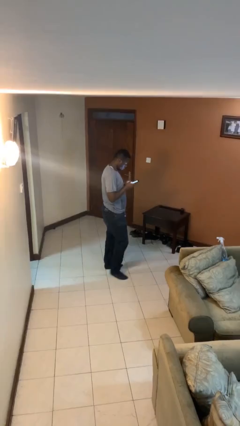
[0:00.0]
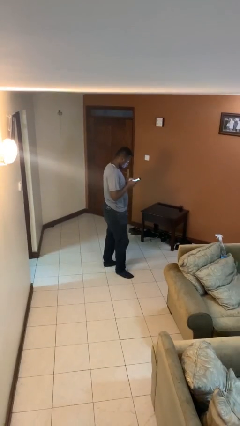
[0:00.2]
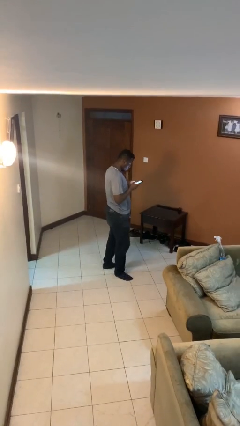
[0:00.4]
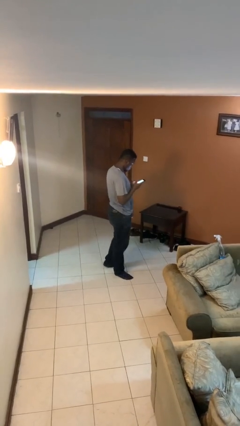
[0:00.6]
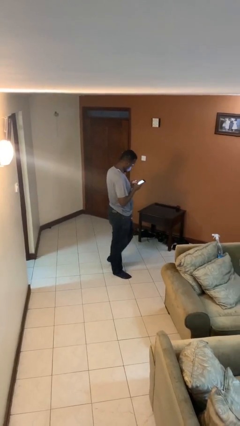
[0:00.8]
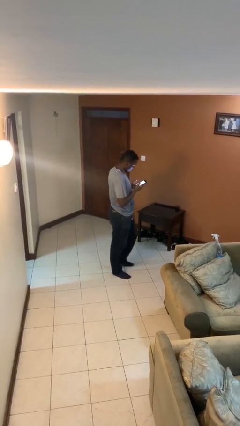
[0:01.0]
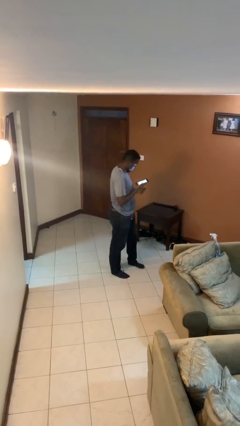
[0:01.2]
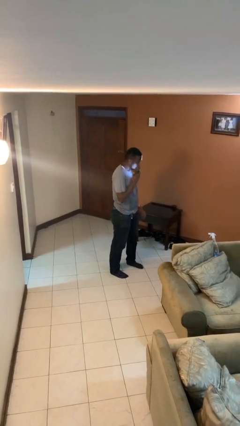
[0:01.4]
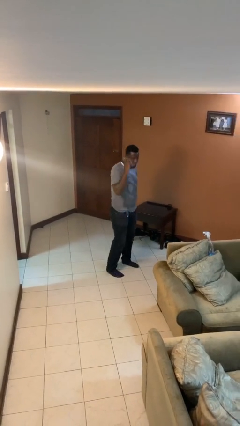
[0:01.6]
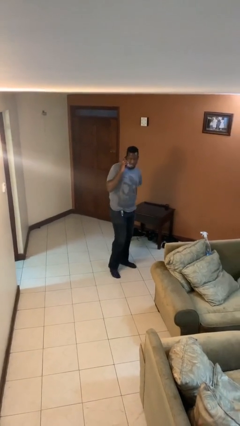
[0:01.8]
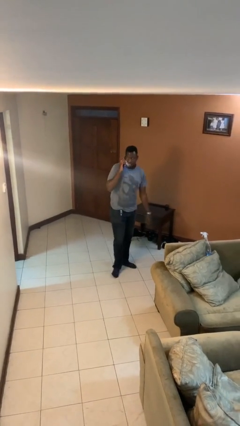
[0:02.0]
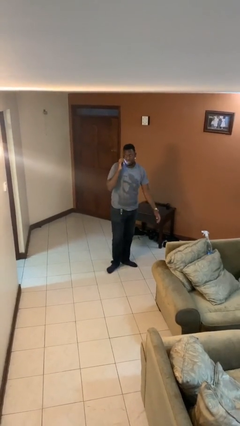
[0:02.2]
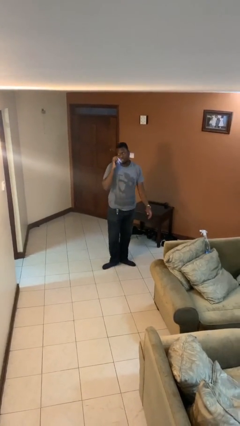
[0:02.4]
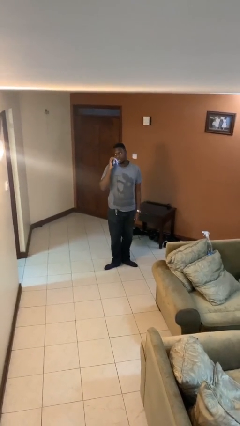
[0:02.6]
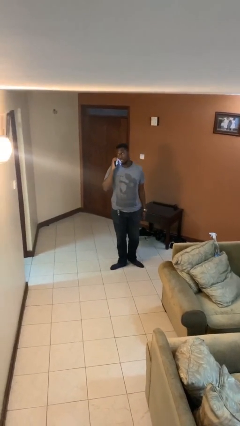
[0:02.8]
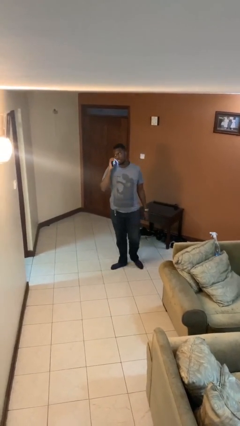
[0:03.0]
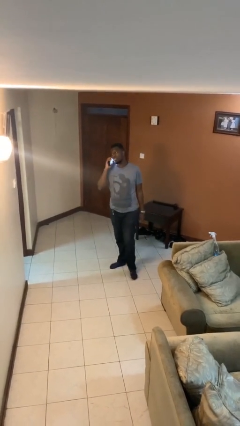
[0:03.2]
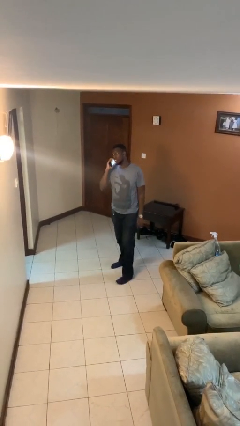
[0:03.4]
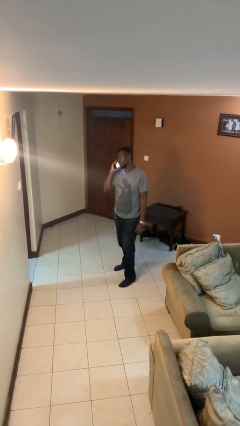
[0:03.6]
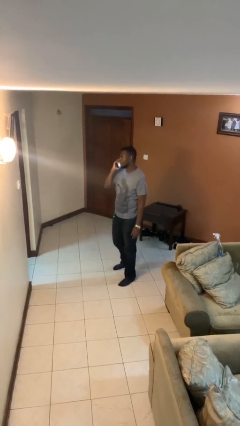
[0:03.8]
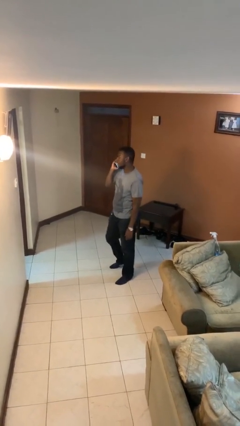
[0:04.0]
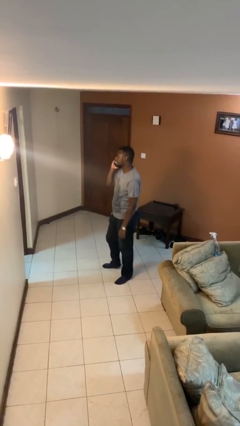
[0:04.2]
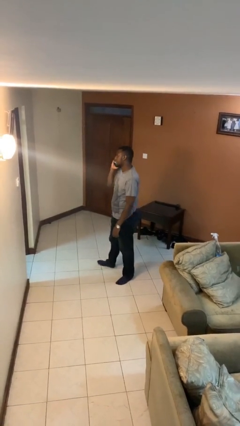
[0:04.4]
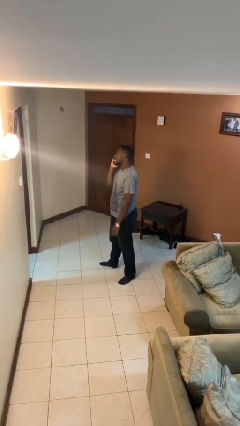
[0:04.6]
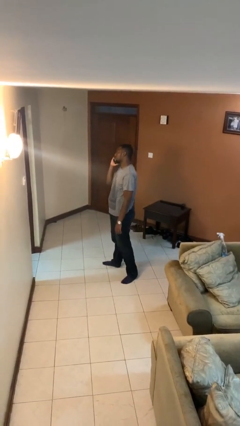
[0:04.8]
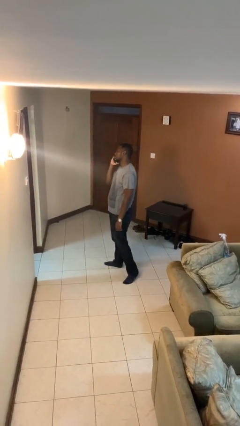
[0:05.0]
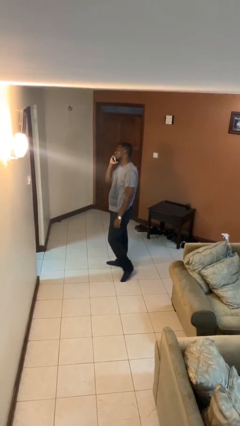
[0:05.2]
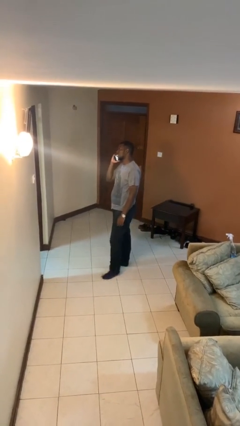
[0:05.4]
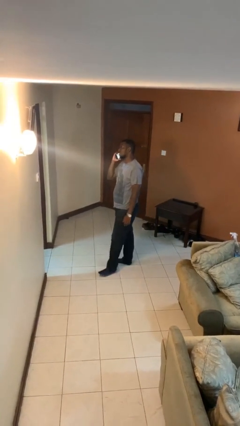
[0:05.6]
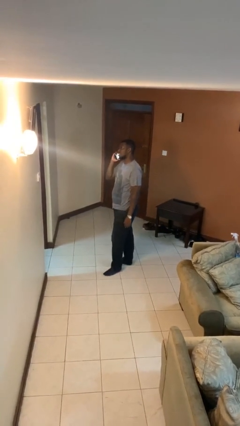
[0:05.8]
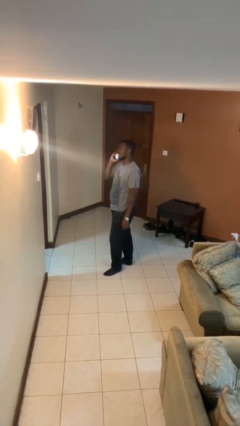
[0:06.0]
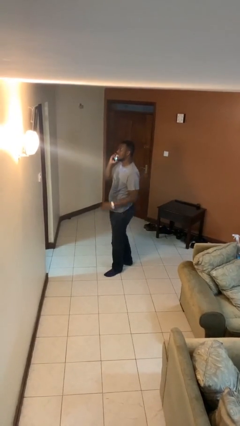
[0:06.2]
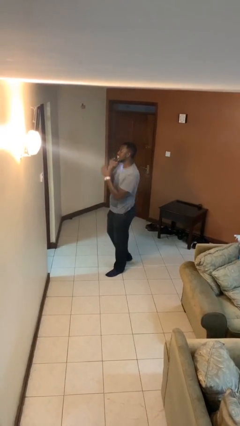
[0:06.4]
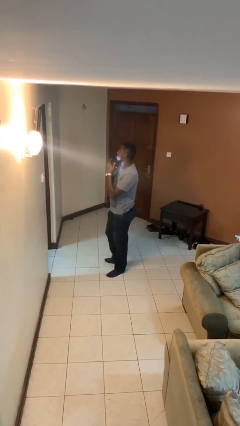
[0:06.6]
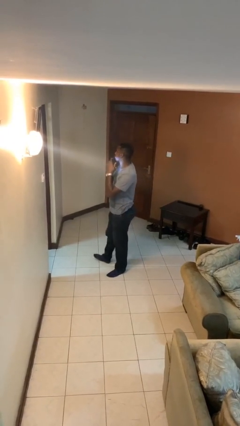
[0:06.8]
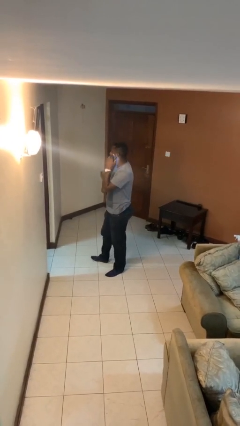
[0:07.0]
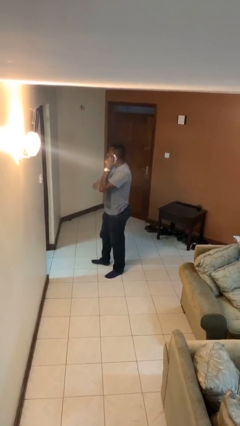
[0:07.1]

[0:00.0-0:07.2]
person talks on phone

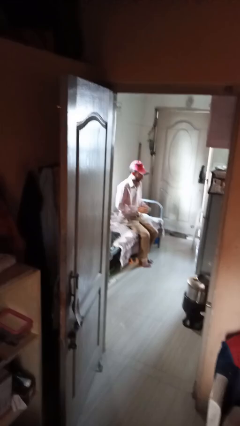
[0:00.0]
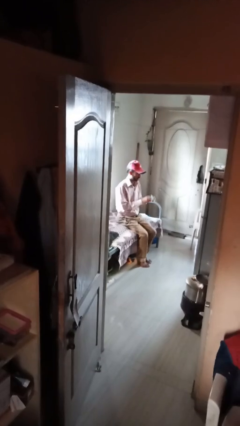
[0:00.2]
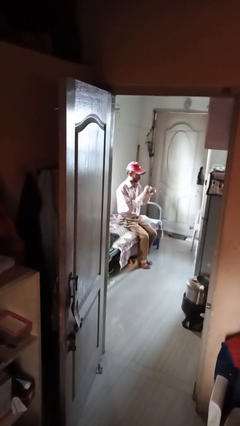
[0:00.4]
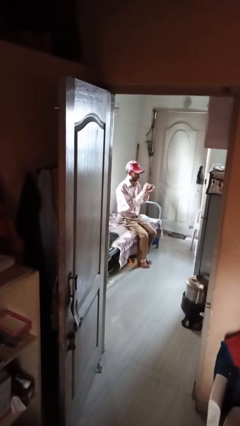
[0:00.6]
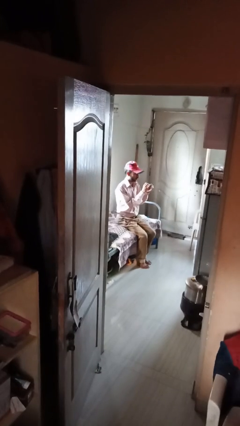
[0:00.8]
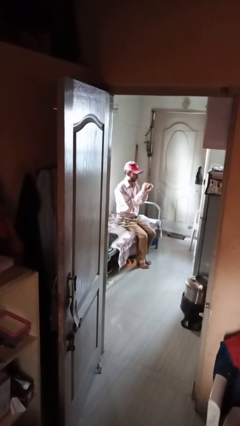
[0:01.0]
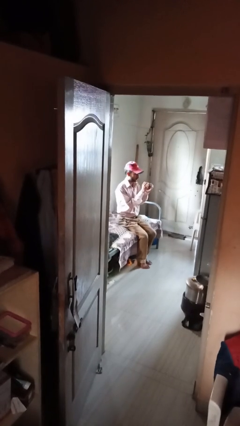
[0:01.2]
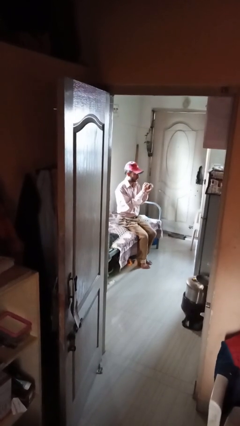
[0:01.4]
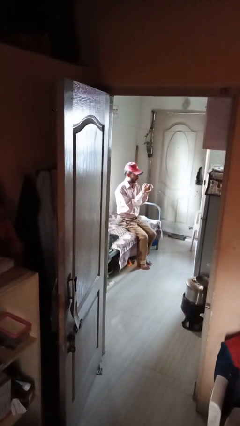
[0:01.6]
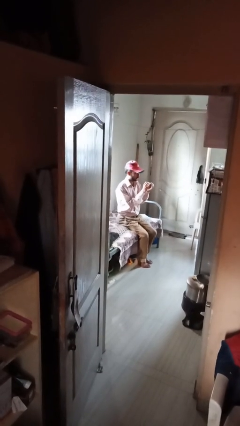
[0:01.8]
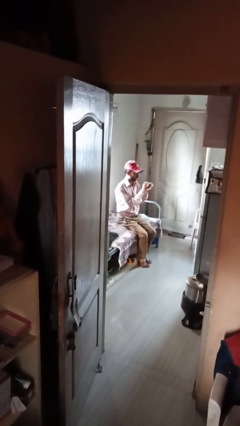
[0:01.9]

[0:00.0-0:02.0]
person files fingernails

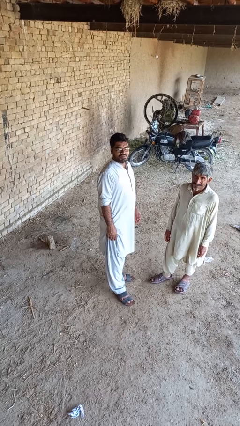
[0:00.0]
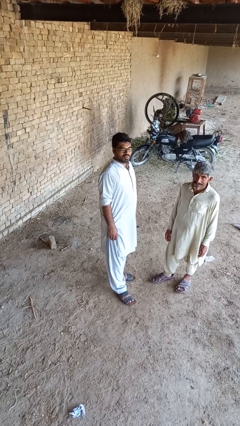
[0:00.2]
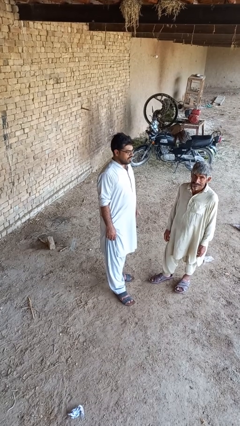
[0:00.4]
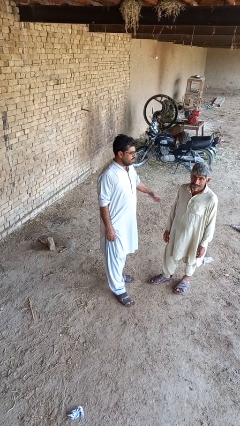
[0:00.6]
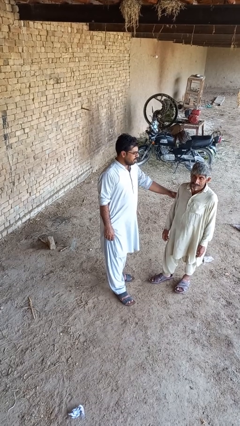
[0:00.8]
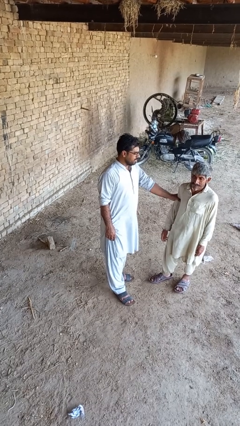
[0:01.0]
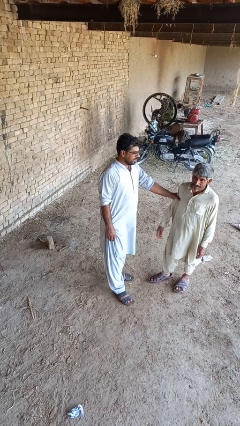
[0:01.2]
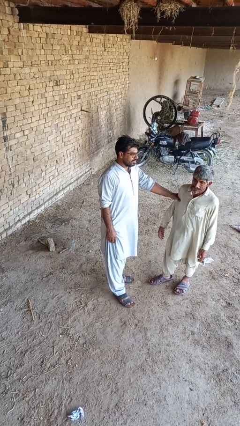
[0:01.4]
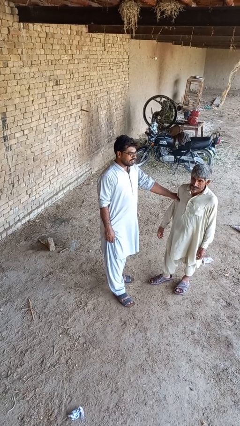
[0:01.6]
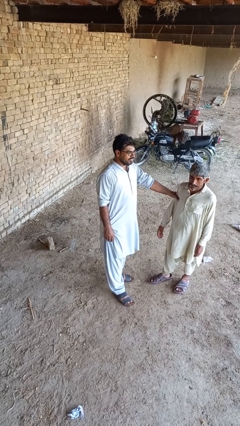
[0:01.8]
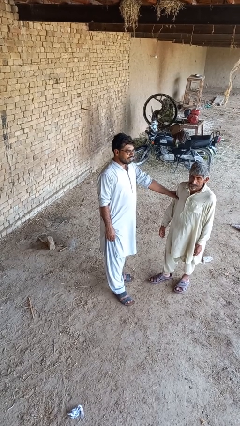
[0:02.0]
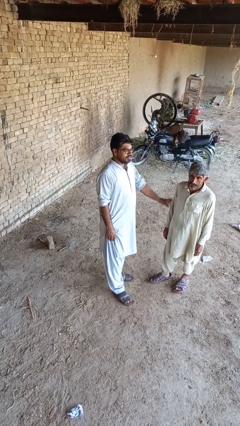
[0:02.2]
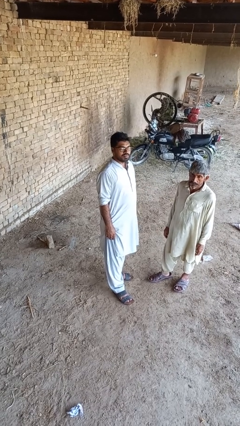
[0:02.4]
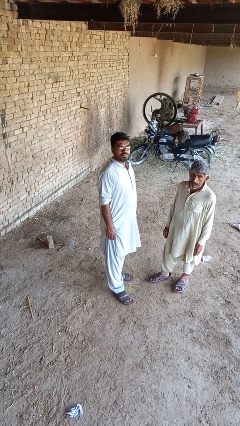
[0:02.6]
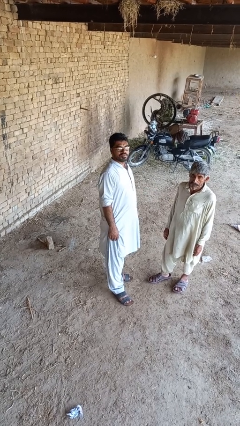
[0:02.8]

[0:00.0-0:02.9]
person grabs person by bicep

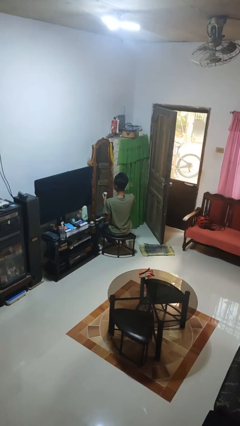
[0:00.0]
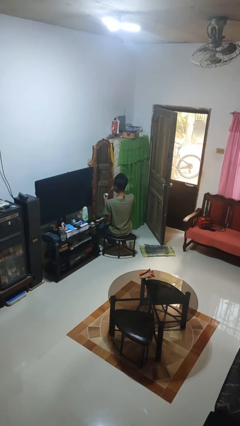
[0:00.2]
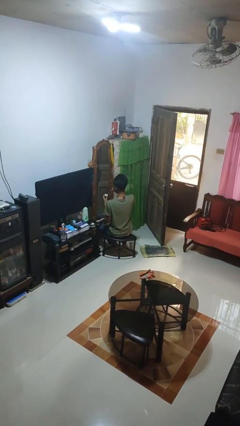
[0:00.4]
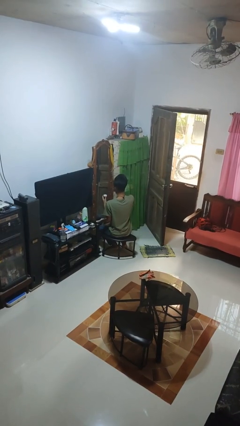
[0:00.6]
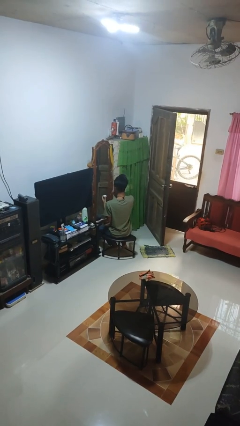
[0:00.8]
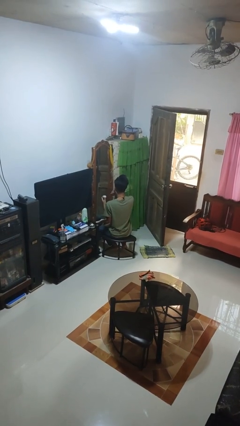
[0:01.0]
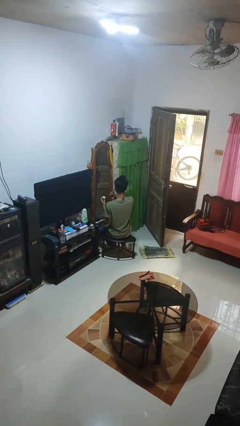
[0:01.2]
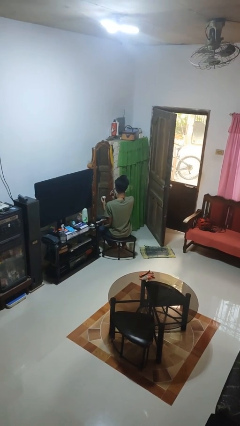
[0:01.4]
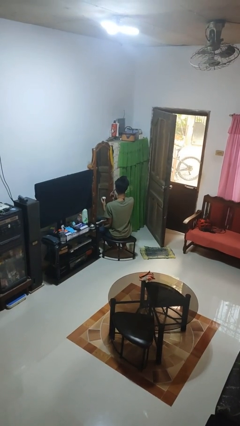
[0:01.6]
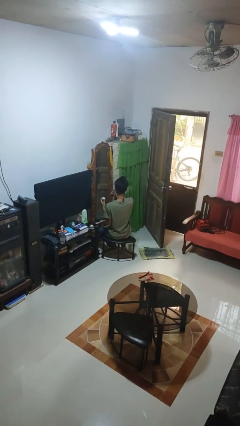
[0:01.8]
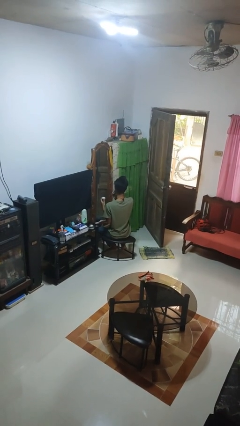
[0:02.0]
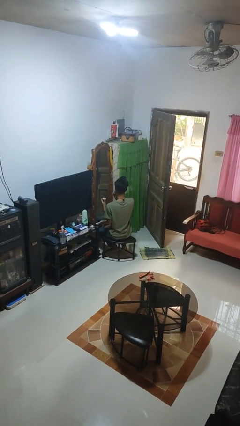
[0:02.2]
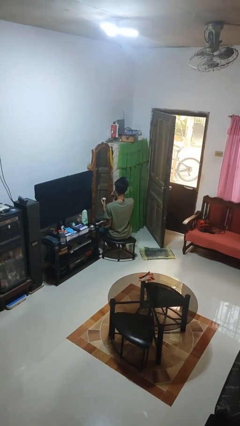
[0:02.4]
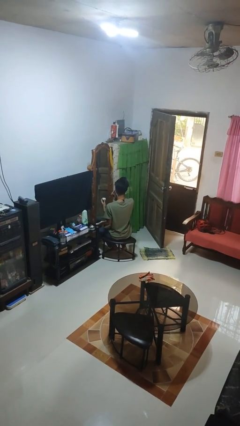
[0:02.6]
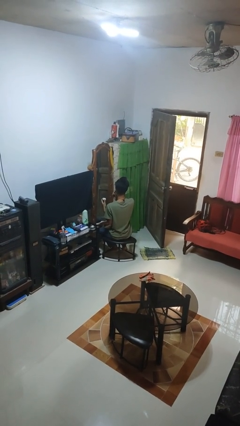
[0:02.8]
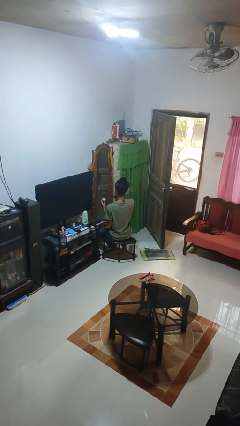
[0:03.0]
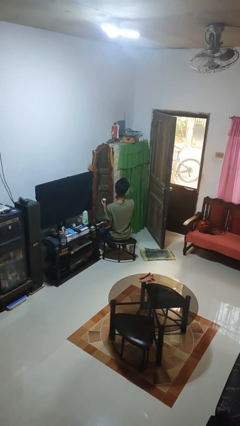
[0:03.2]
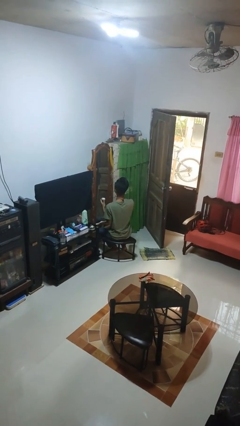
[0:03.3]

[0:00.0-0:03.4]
person applies eye makeup

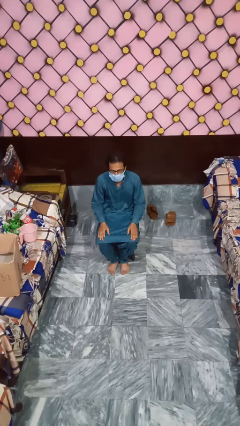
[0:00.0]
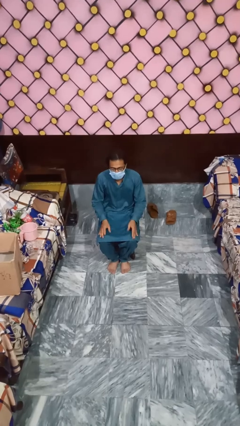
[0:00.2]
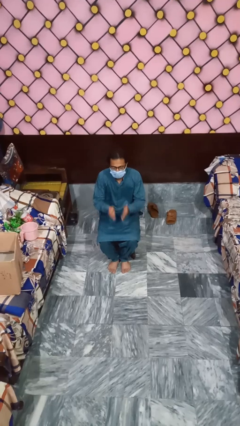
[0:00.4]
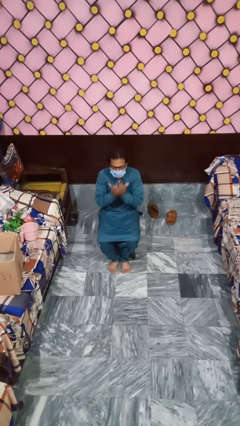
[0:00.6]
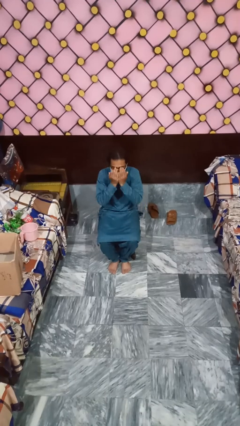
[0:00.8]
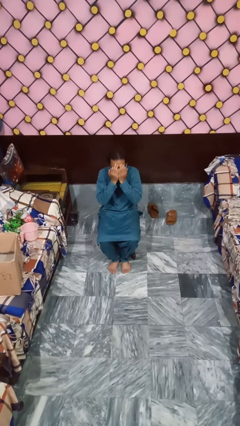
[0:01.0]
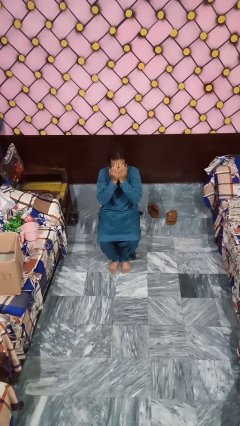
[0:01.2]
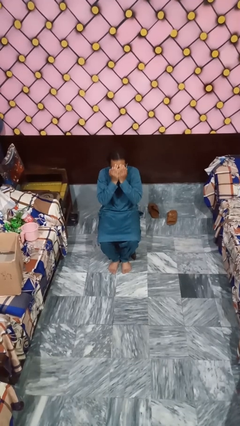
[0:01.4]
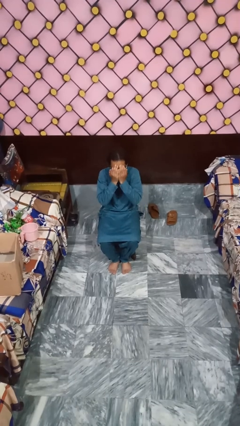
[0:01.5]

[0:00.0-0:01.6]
person covers face with hands

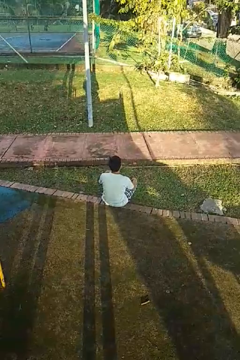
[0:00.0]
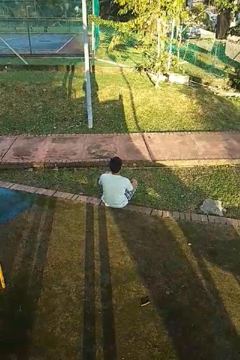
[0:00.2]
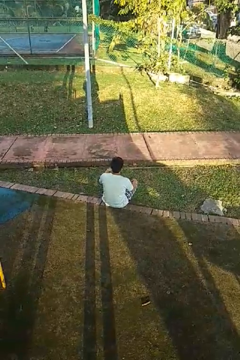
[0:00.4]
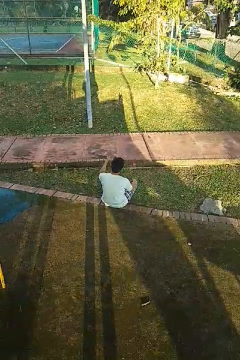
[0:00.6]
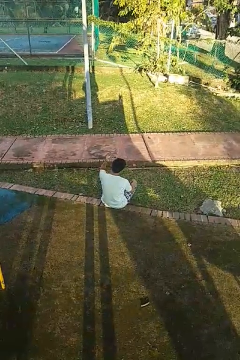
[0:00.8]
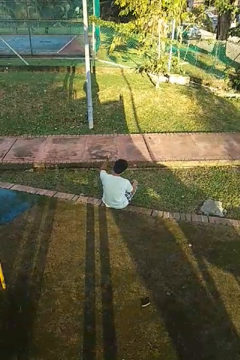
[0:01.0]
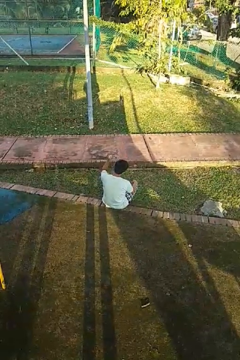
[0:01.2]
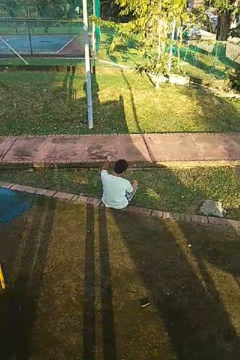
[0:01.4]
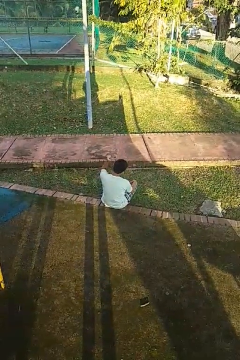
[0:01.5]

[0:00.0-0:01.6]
person gestures behind me
